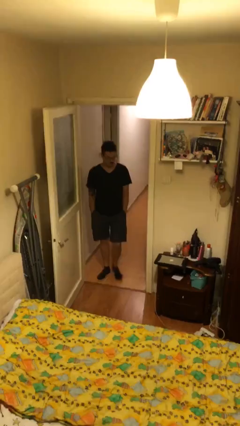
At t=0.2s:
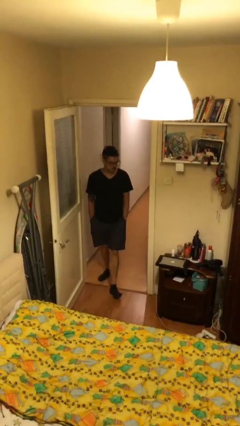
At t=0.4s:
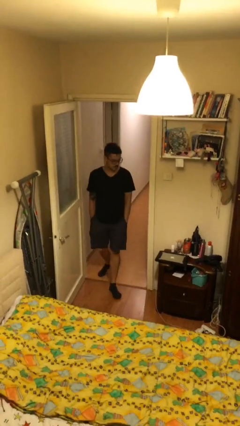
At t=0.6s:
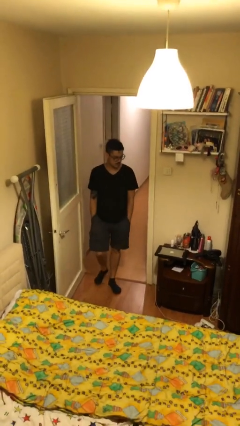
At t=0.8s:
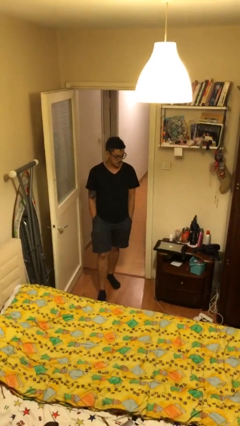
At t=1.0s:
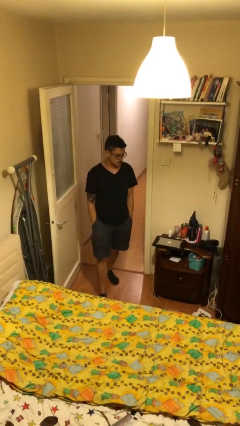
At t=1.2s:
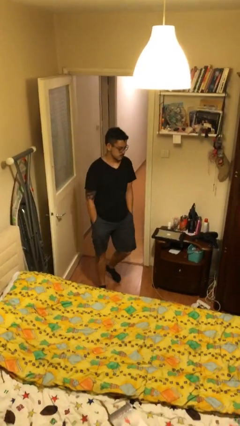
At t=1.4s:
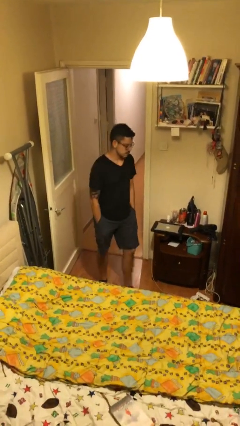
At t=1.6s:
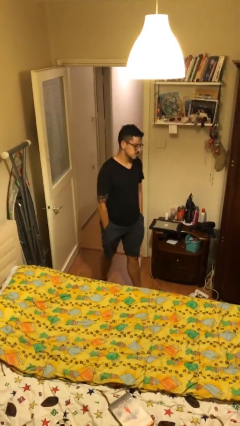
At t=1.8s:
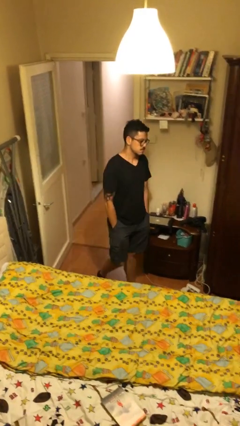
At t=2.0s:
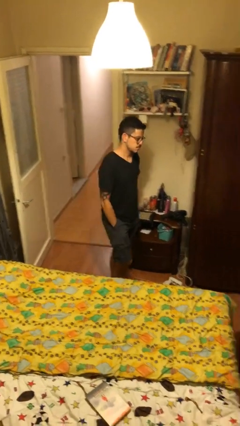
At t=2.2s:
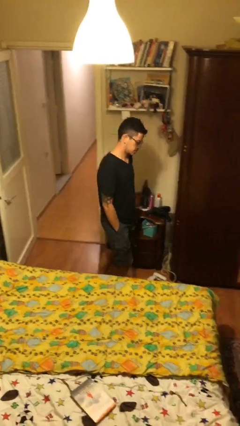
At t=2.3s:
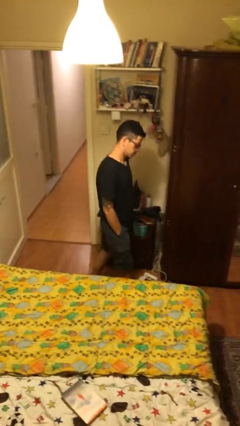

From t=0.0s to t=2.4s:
person enters scene through structure

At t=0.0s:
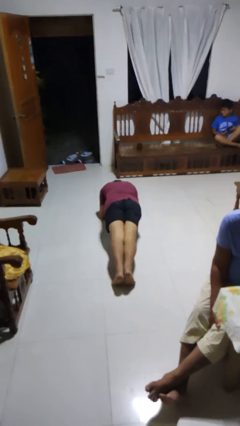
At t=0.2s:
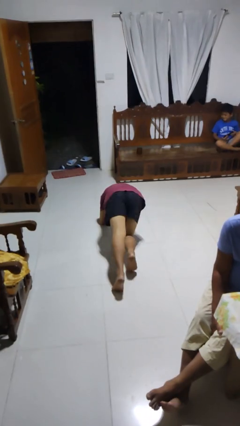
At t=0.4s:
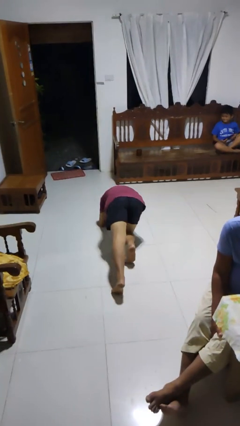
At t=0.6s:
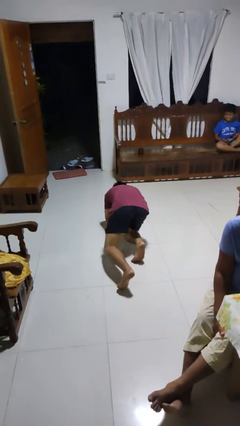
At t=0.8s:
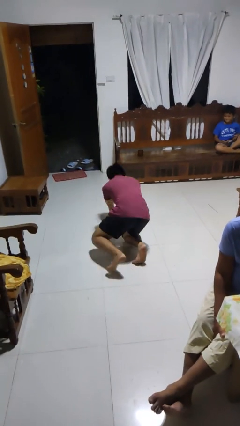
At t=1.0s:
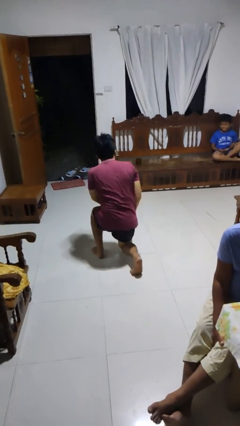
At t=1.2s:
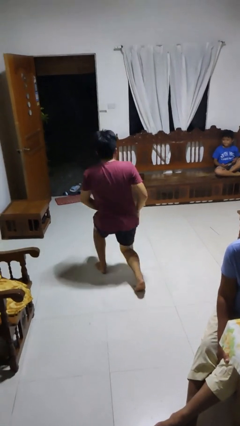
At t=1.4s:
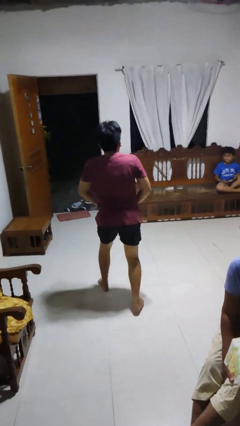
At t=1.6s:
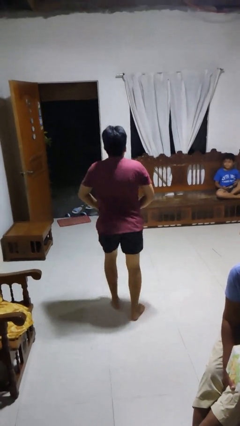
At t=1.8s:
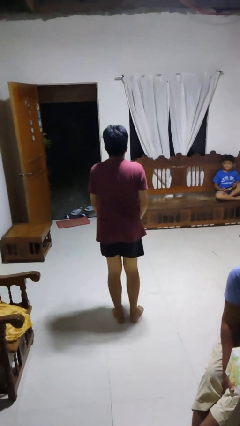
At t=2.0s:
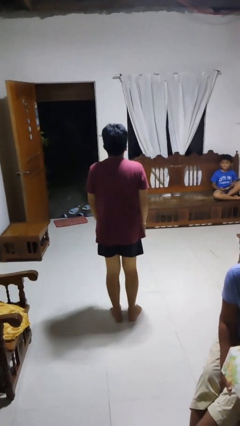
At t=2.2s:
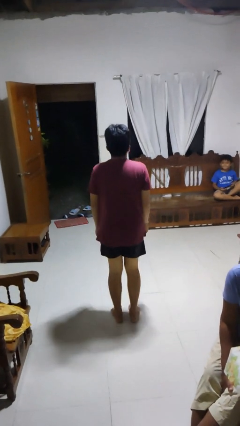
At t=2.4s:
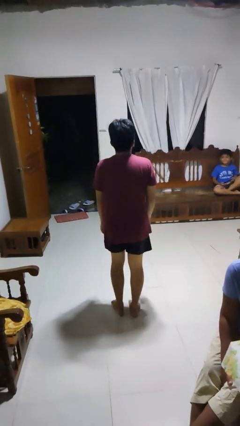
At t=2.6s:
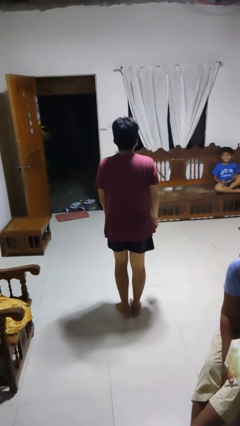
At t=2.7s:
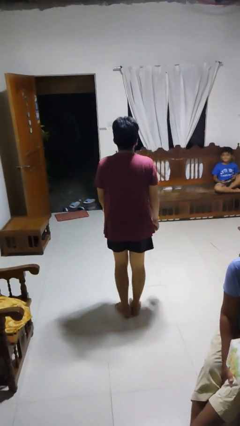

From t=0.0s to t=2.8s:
person stands up from floor

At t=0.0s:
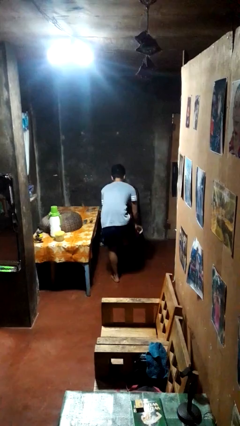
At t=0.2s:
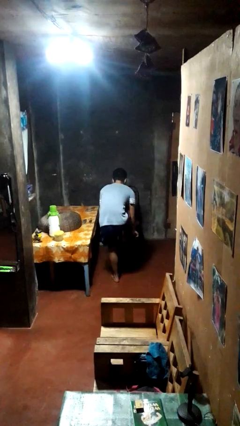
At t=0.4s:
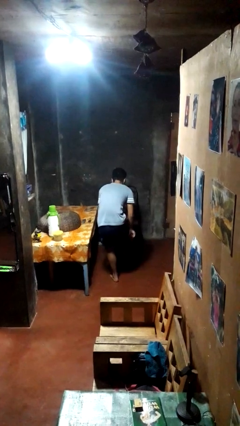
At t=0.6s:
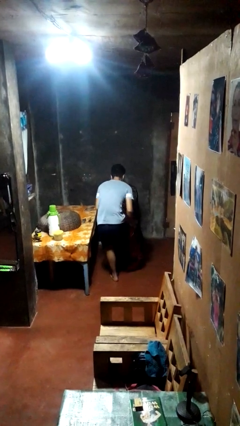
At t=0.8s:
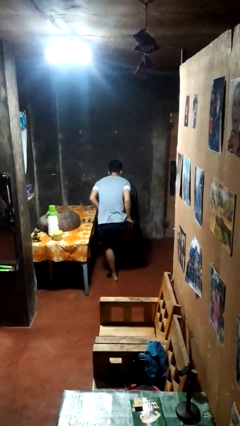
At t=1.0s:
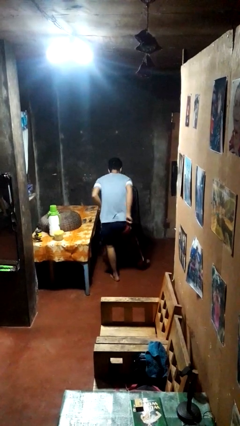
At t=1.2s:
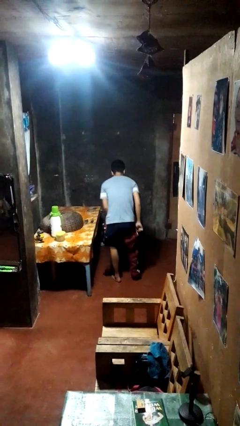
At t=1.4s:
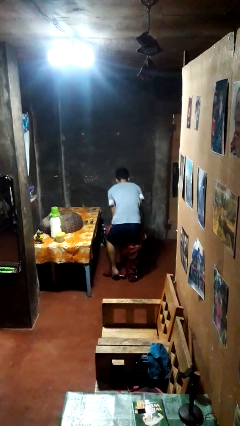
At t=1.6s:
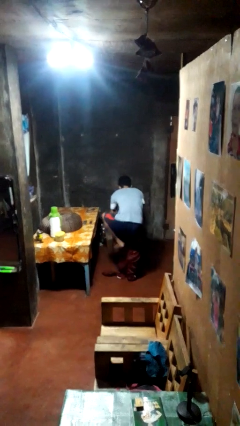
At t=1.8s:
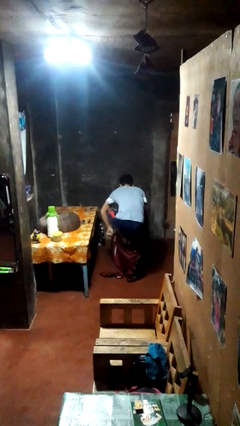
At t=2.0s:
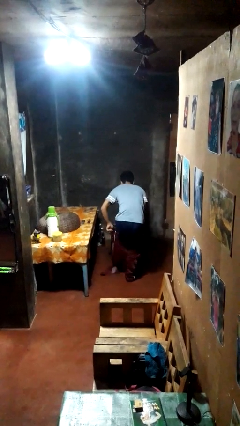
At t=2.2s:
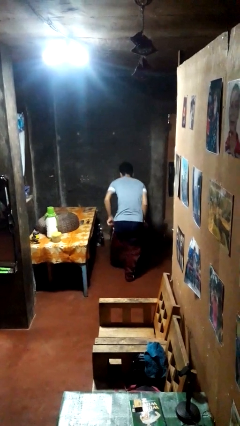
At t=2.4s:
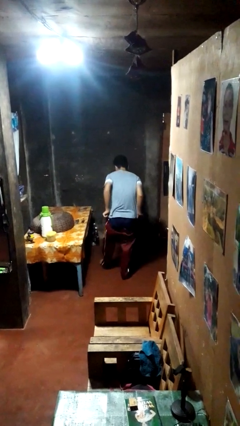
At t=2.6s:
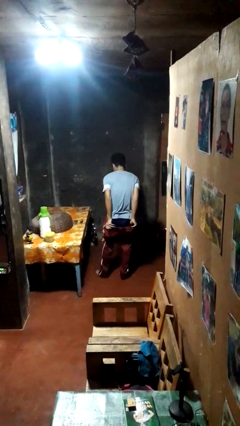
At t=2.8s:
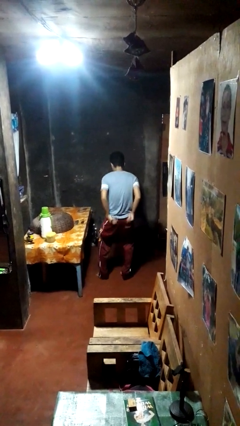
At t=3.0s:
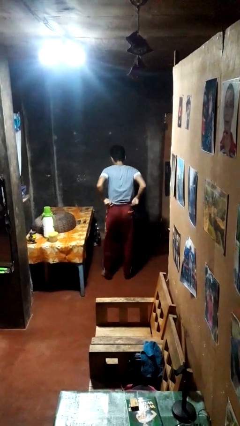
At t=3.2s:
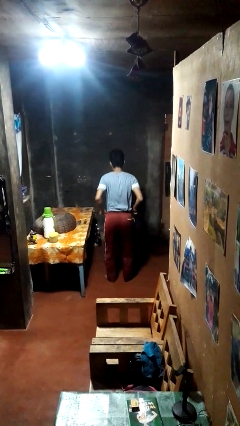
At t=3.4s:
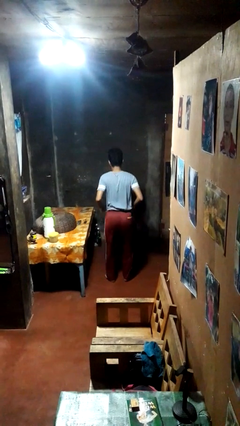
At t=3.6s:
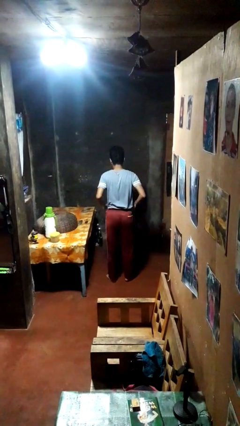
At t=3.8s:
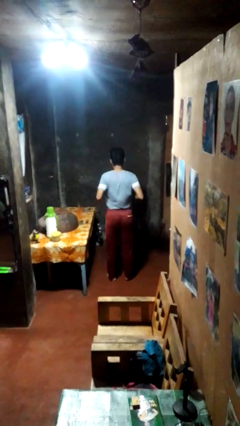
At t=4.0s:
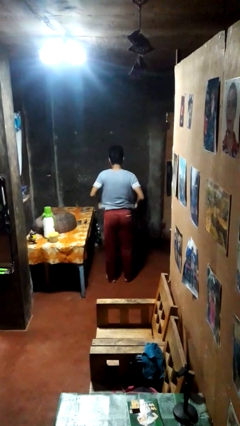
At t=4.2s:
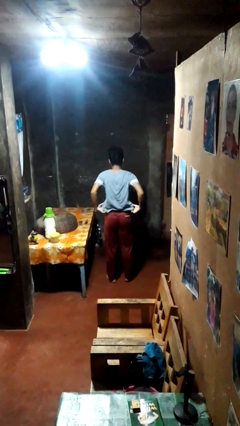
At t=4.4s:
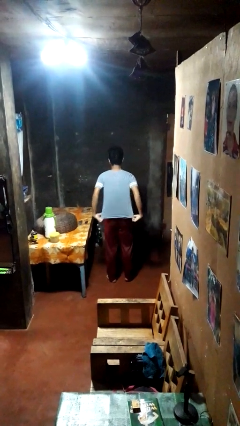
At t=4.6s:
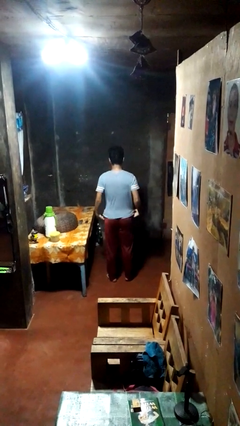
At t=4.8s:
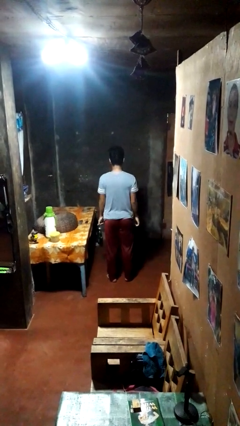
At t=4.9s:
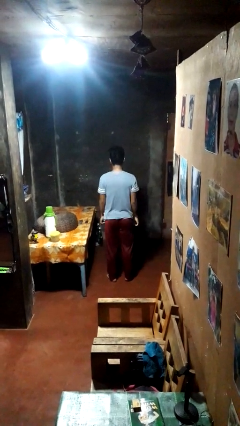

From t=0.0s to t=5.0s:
person puts on pants

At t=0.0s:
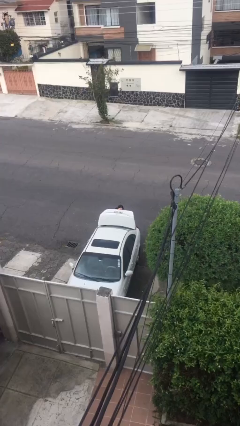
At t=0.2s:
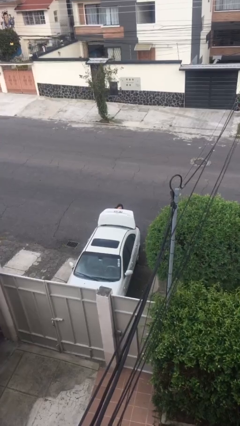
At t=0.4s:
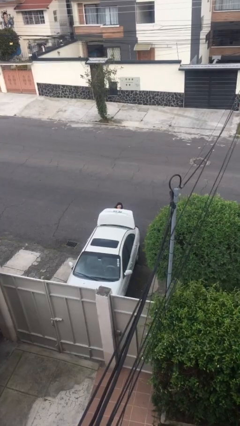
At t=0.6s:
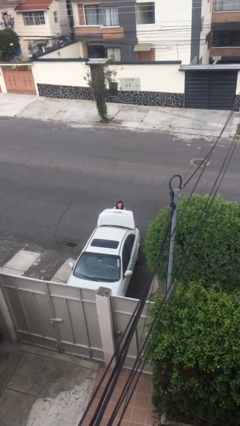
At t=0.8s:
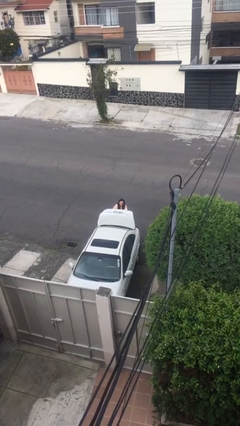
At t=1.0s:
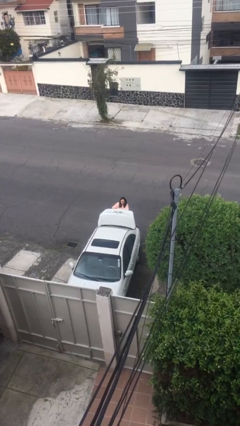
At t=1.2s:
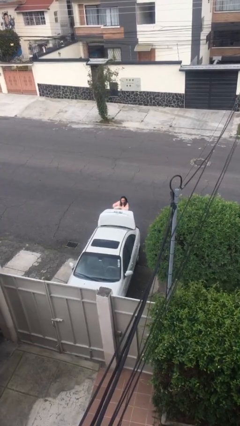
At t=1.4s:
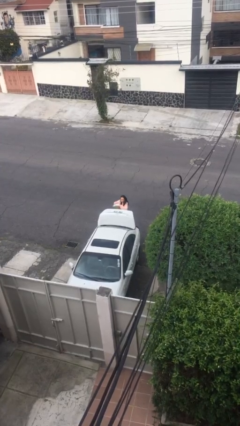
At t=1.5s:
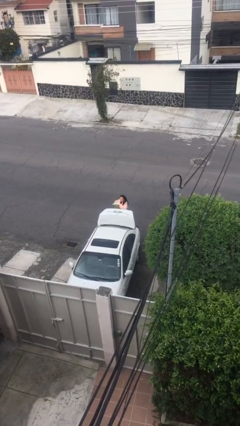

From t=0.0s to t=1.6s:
person unloads car

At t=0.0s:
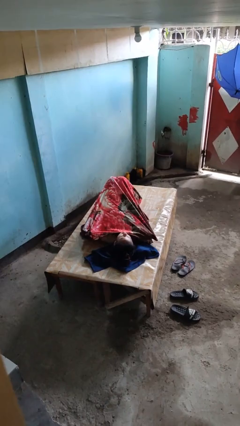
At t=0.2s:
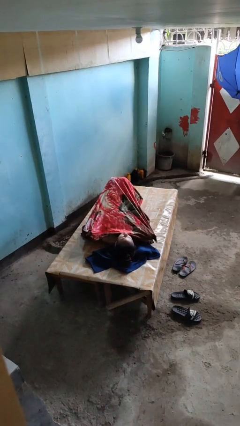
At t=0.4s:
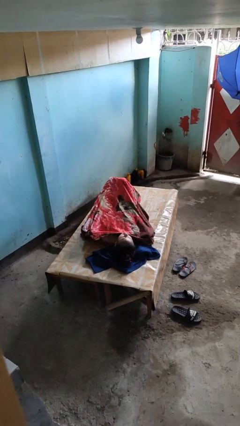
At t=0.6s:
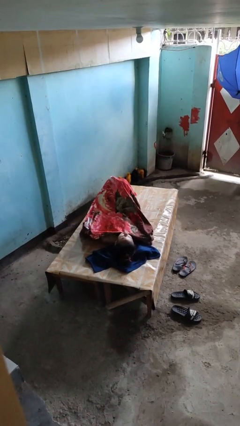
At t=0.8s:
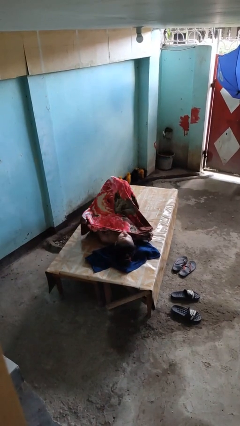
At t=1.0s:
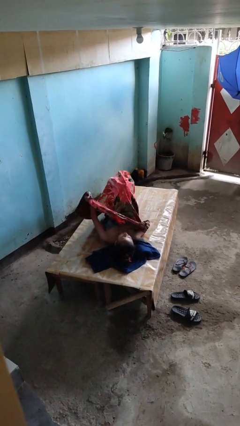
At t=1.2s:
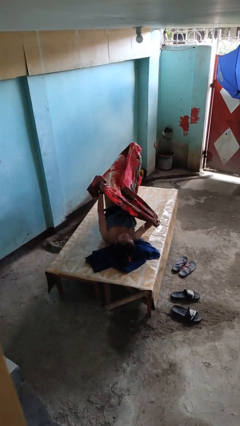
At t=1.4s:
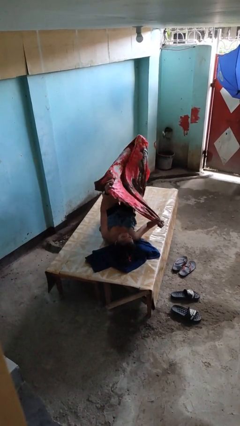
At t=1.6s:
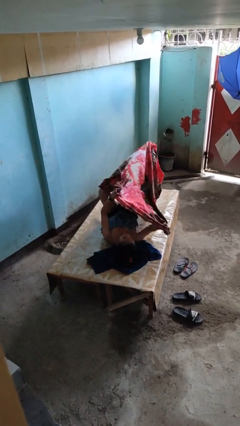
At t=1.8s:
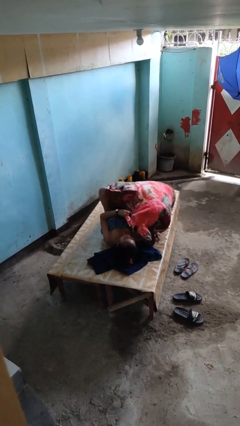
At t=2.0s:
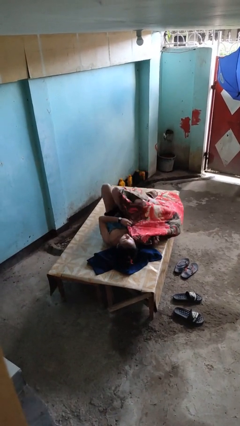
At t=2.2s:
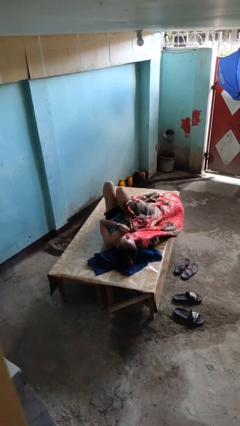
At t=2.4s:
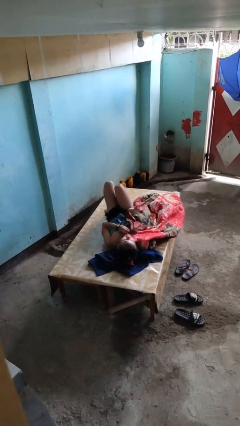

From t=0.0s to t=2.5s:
person uncovers with blanket

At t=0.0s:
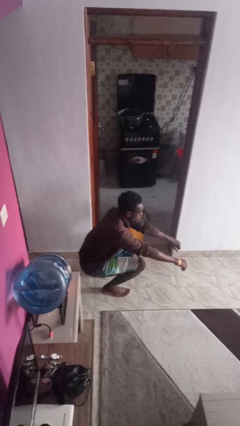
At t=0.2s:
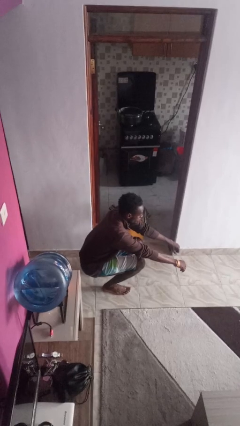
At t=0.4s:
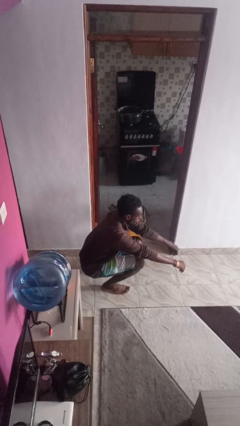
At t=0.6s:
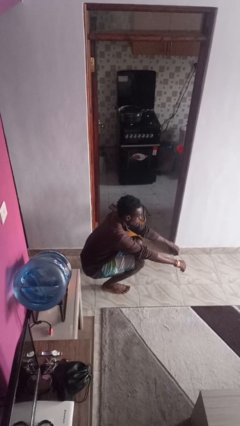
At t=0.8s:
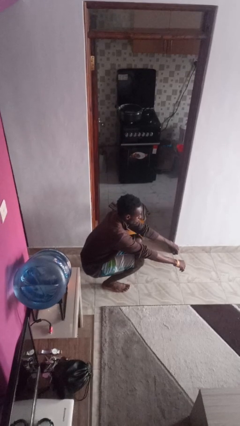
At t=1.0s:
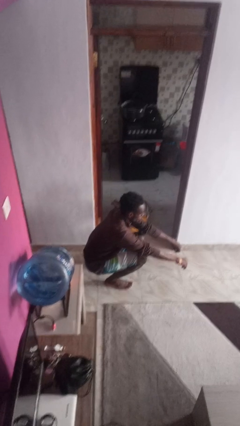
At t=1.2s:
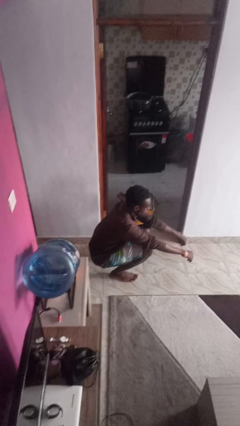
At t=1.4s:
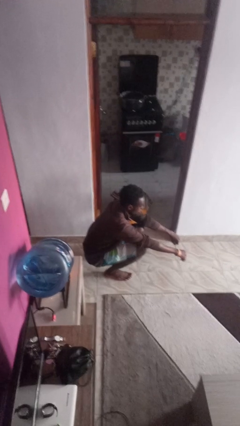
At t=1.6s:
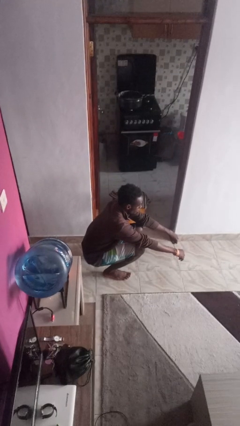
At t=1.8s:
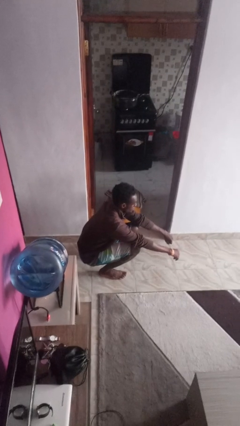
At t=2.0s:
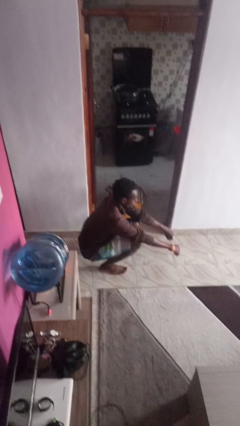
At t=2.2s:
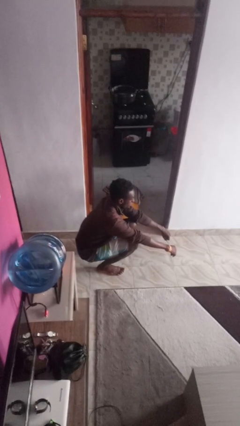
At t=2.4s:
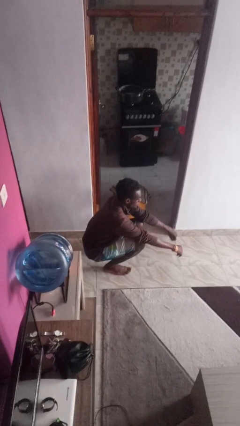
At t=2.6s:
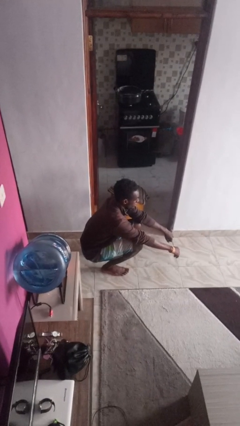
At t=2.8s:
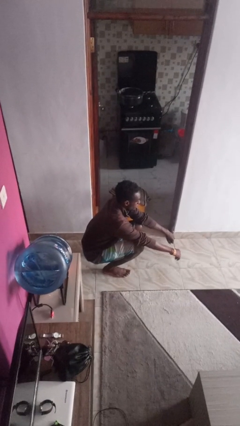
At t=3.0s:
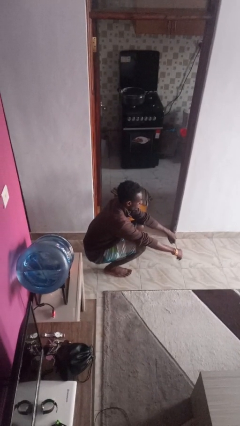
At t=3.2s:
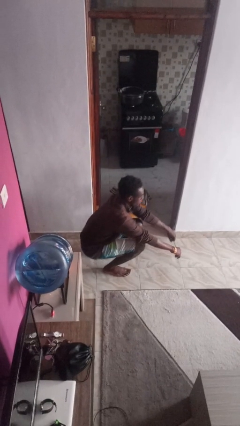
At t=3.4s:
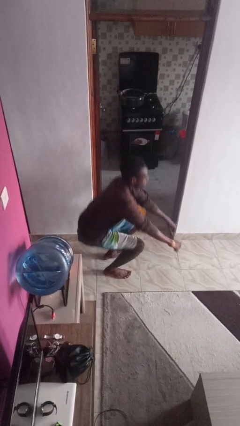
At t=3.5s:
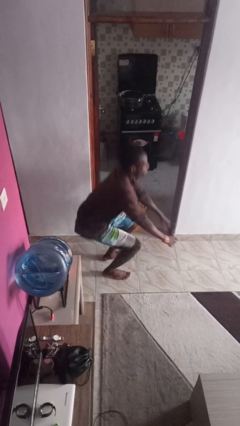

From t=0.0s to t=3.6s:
person squats
